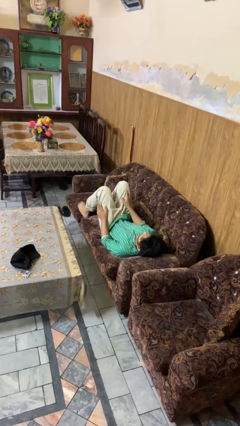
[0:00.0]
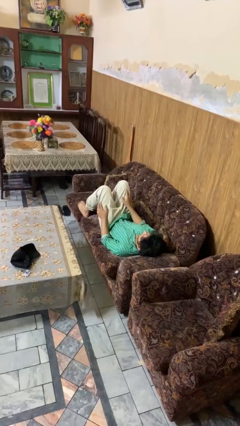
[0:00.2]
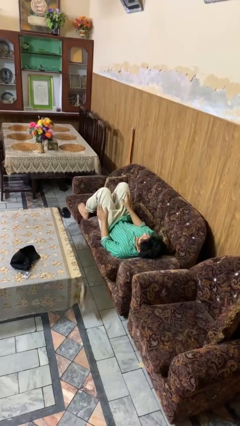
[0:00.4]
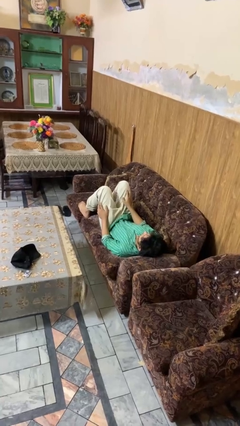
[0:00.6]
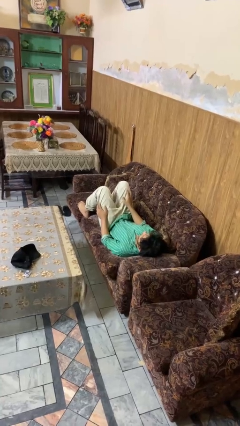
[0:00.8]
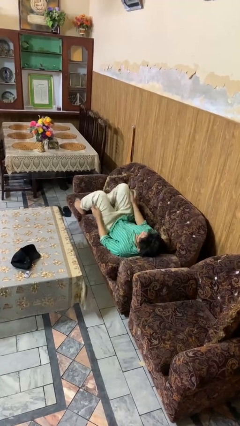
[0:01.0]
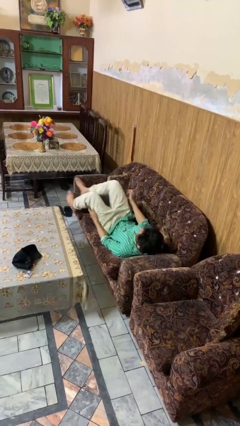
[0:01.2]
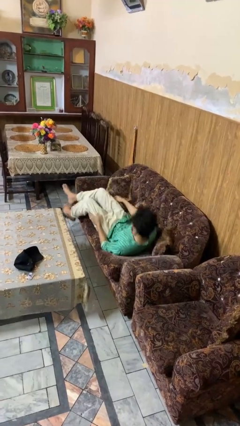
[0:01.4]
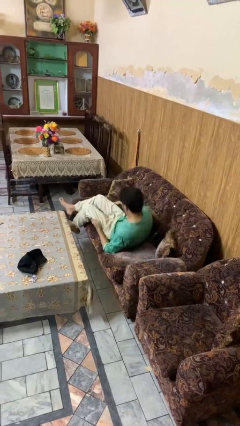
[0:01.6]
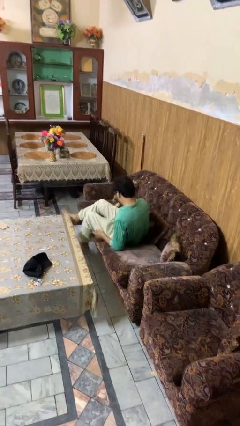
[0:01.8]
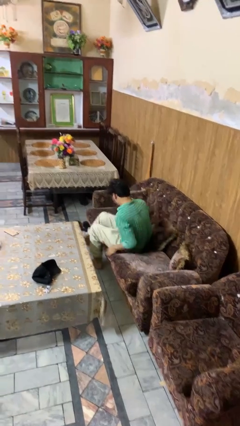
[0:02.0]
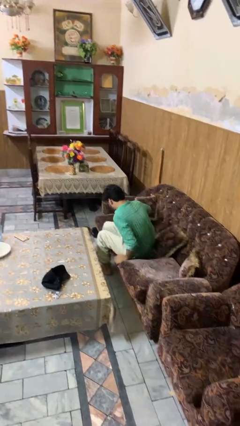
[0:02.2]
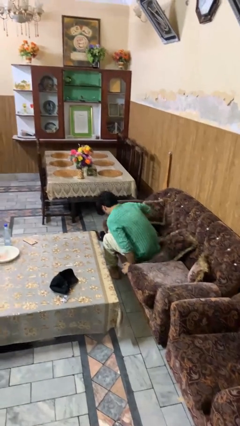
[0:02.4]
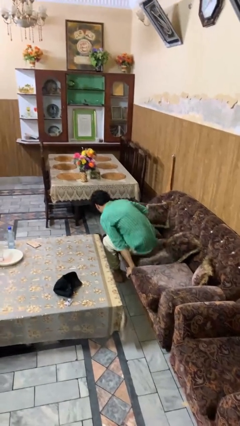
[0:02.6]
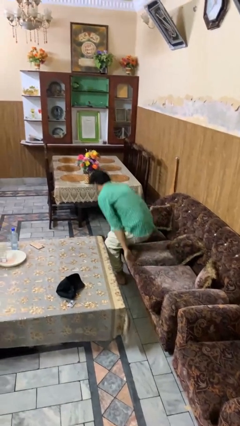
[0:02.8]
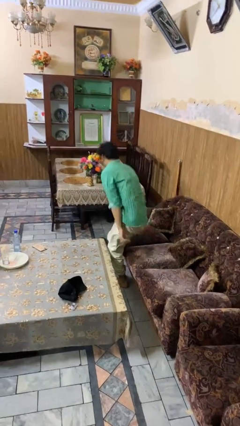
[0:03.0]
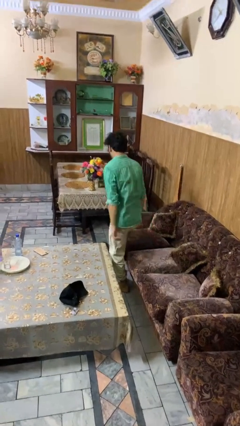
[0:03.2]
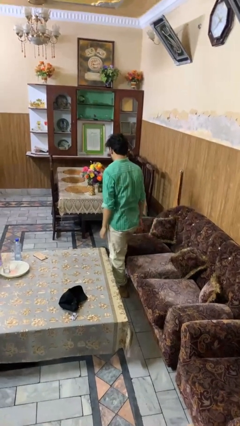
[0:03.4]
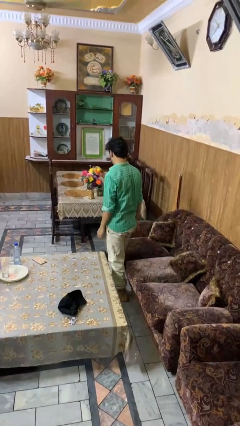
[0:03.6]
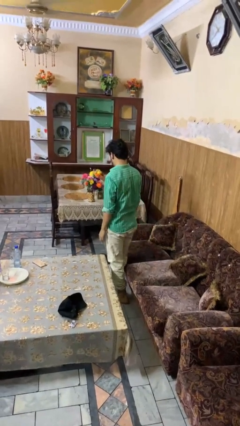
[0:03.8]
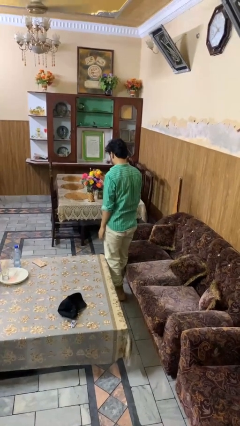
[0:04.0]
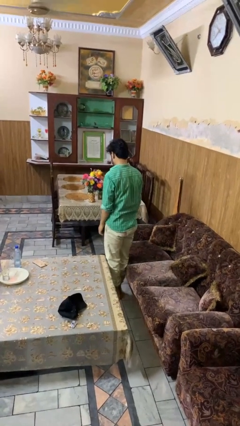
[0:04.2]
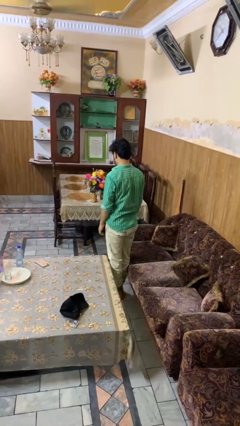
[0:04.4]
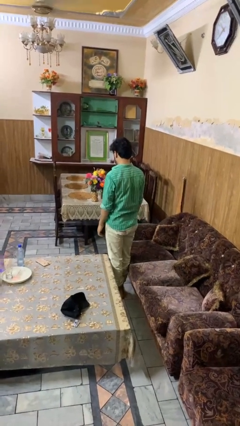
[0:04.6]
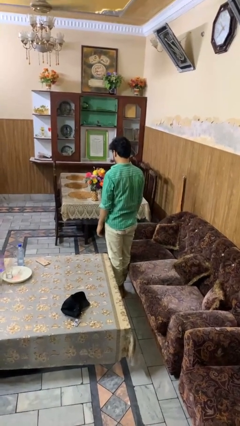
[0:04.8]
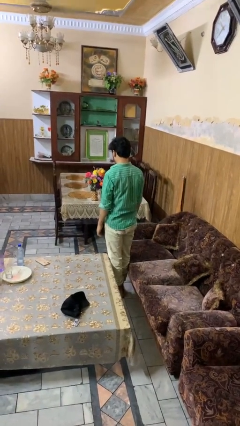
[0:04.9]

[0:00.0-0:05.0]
person stands up

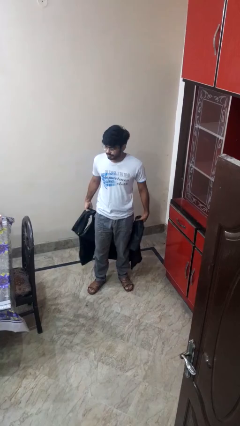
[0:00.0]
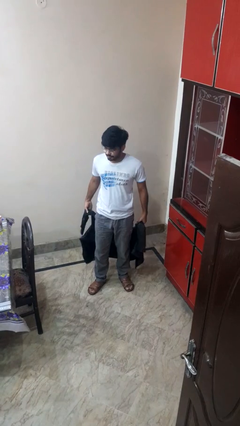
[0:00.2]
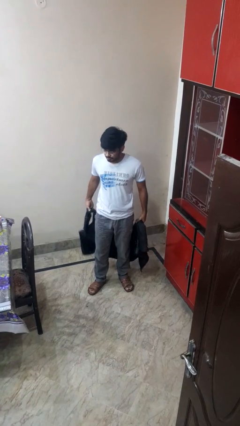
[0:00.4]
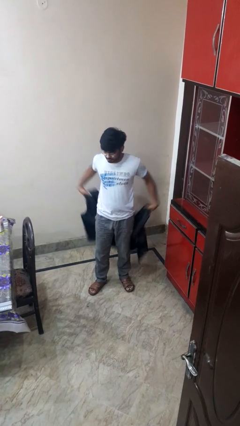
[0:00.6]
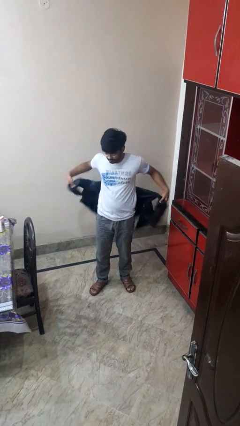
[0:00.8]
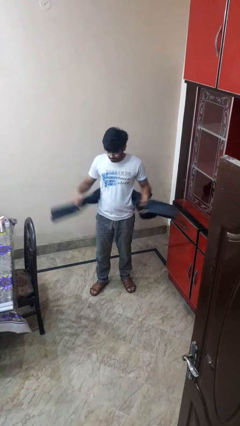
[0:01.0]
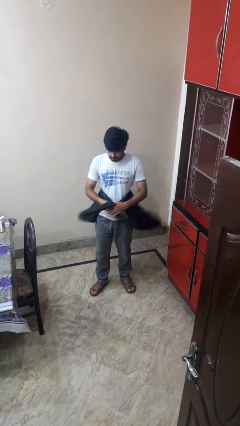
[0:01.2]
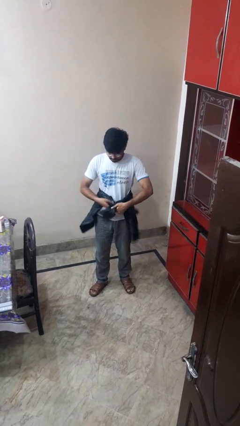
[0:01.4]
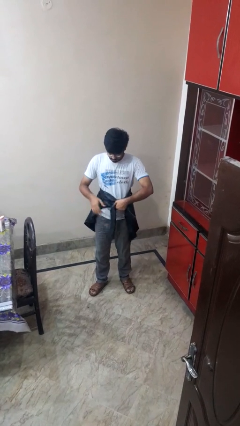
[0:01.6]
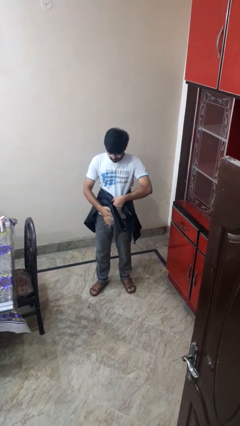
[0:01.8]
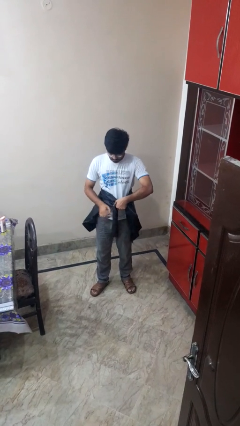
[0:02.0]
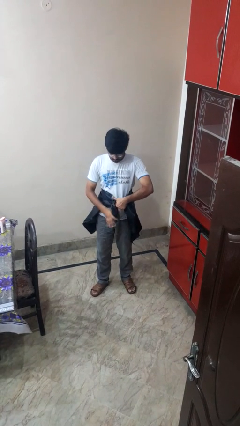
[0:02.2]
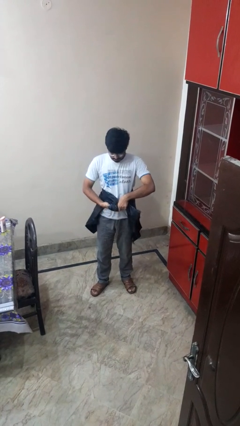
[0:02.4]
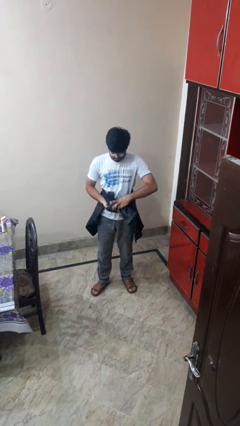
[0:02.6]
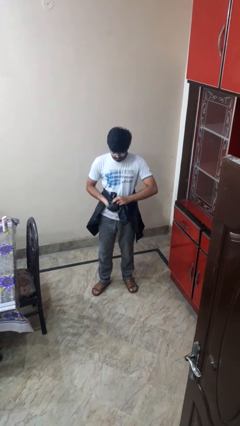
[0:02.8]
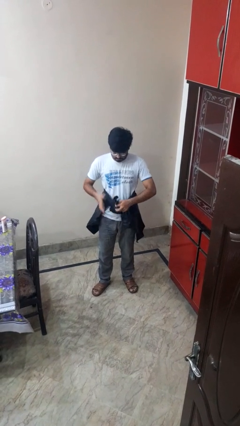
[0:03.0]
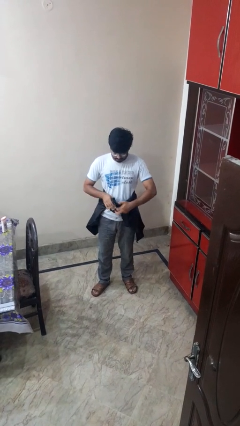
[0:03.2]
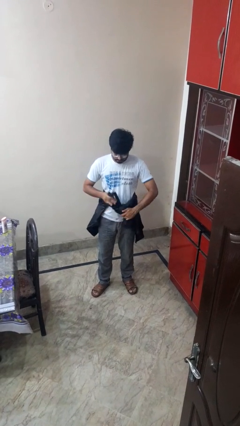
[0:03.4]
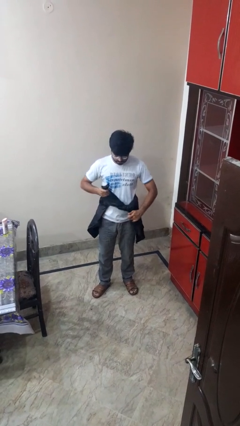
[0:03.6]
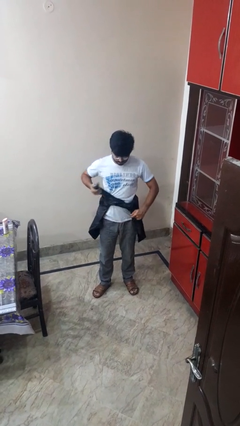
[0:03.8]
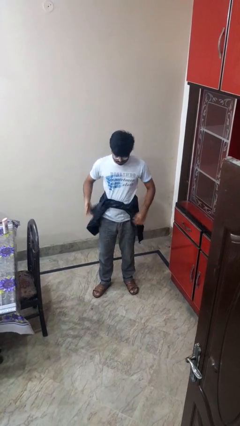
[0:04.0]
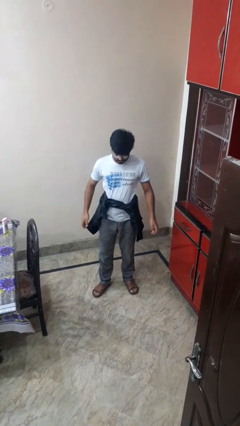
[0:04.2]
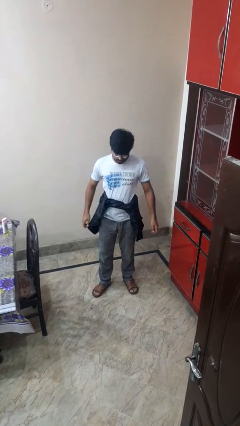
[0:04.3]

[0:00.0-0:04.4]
person ties jacket around waist

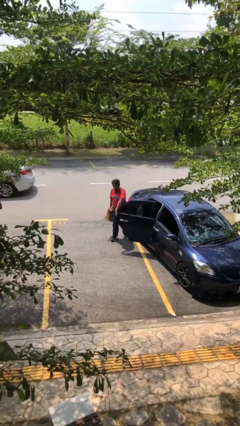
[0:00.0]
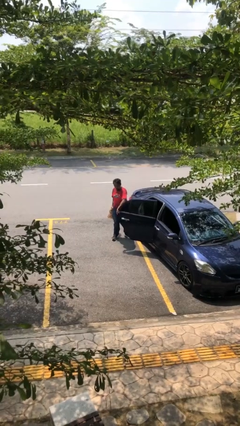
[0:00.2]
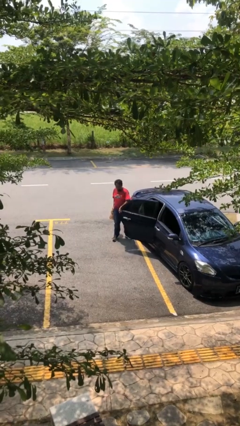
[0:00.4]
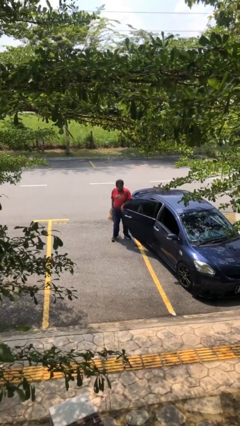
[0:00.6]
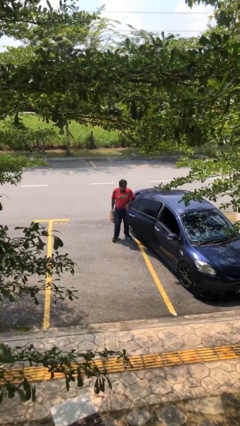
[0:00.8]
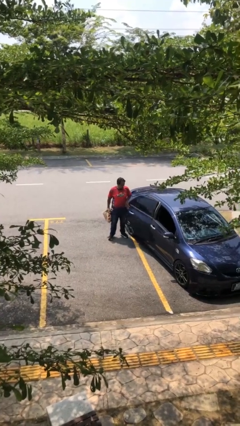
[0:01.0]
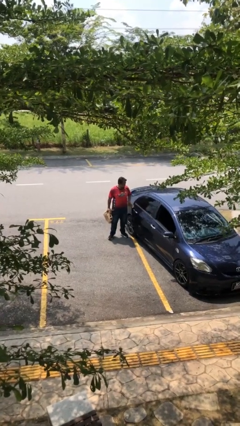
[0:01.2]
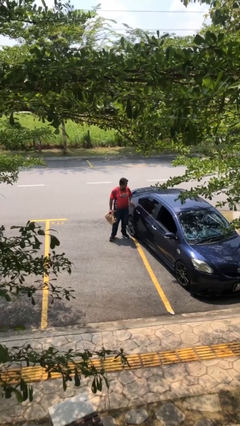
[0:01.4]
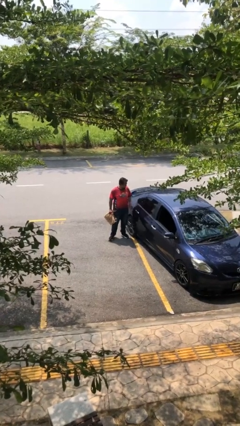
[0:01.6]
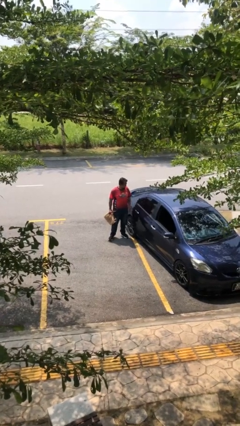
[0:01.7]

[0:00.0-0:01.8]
person closes car door

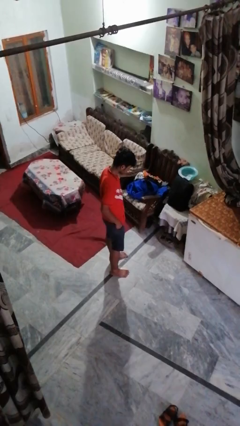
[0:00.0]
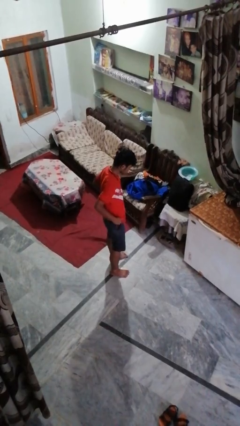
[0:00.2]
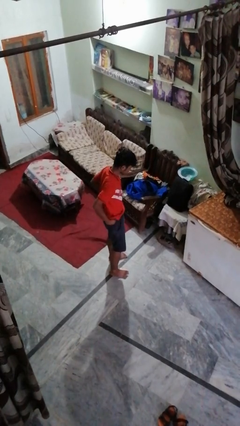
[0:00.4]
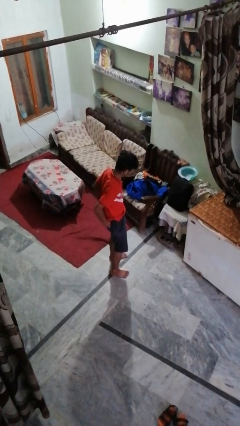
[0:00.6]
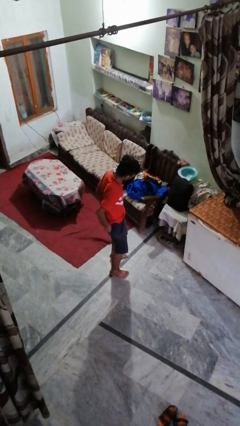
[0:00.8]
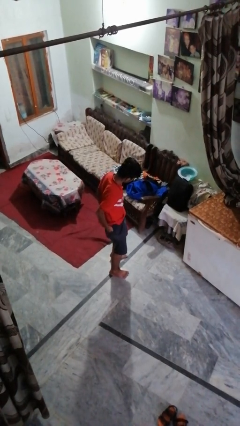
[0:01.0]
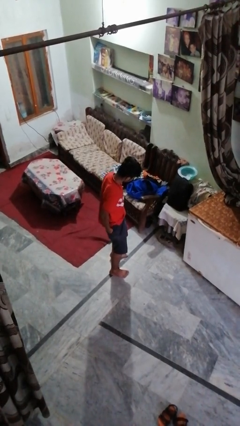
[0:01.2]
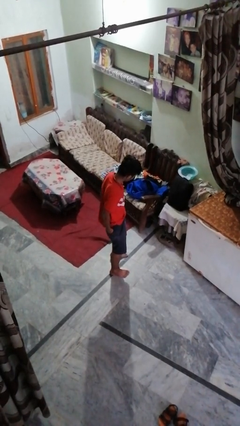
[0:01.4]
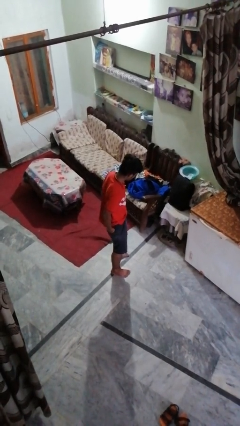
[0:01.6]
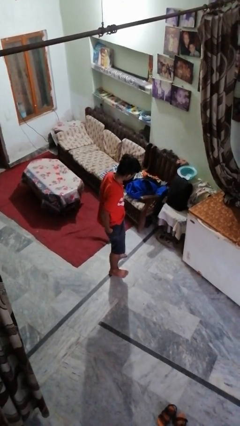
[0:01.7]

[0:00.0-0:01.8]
person puts hands in back pockets

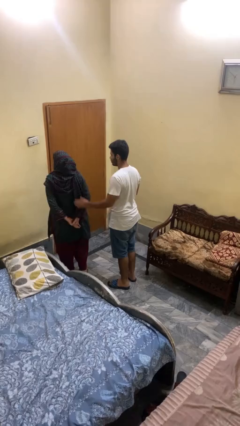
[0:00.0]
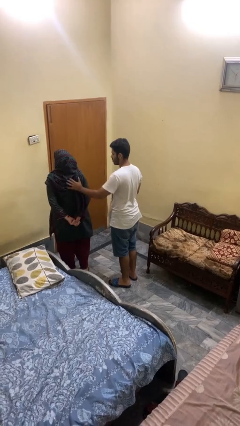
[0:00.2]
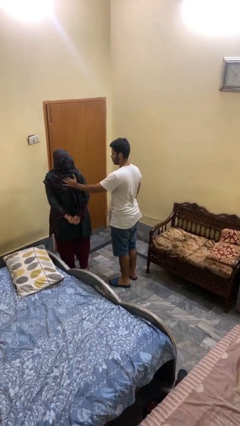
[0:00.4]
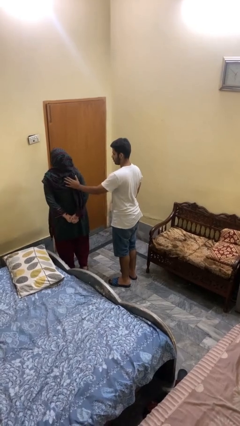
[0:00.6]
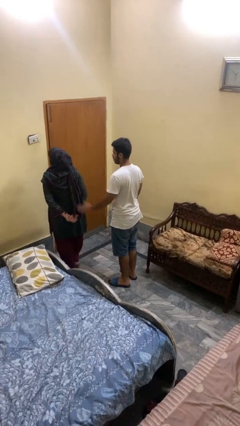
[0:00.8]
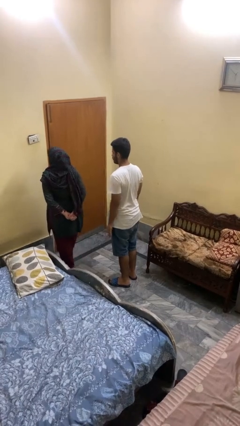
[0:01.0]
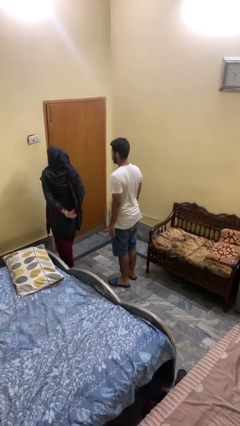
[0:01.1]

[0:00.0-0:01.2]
person shoves person

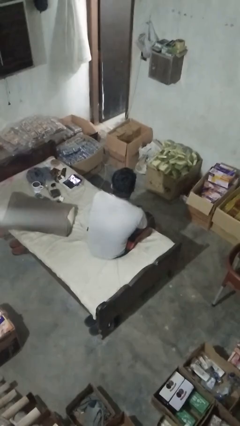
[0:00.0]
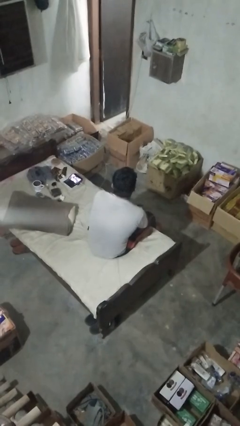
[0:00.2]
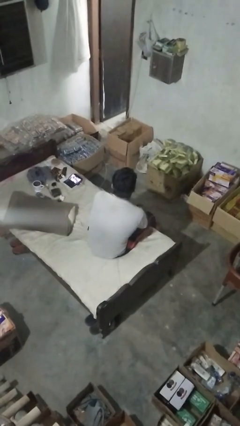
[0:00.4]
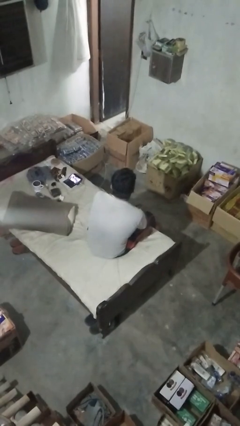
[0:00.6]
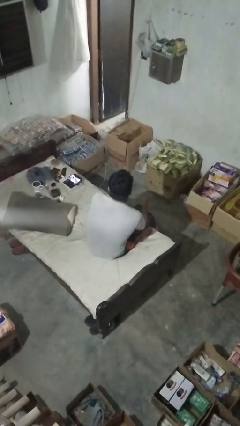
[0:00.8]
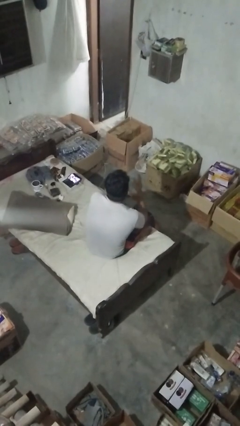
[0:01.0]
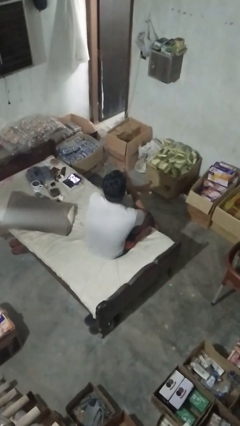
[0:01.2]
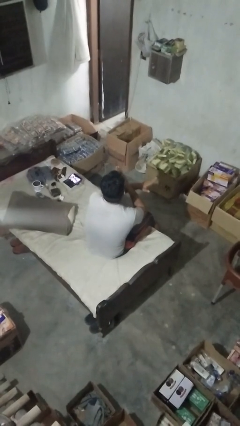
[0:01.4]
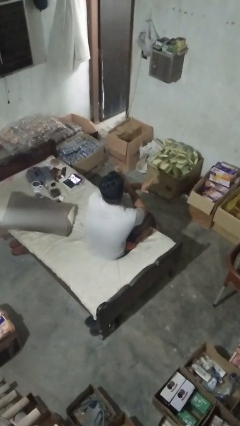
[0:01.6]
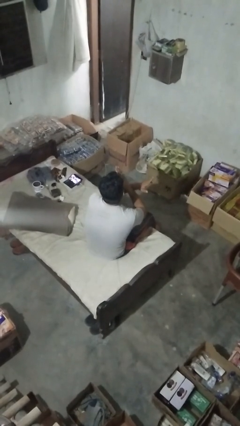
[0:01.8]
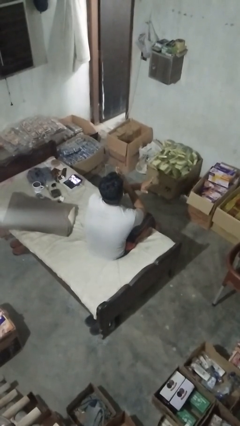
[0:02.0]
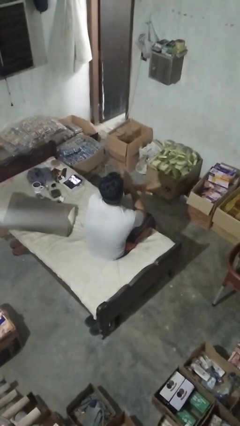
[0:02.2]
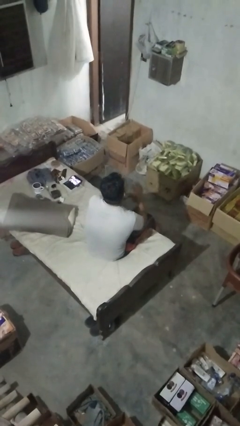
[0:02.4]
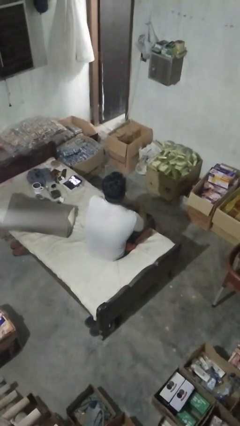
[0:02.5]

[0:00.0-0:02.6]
person gestures arms x

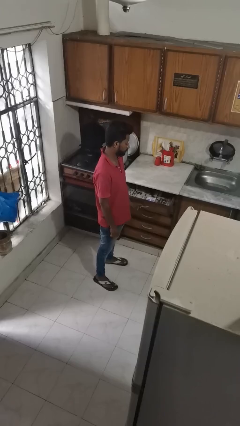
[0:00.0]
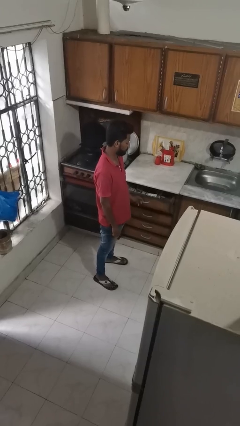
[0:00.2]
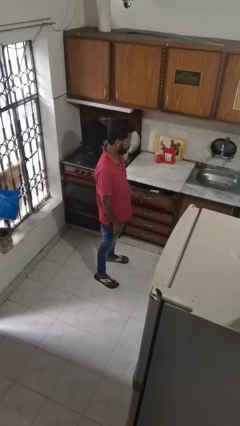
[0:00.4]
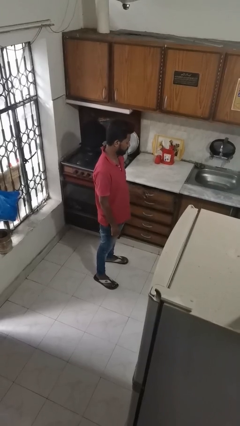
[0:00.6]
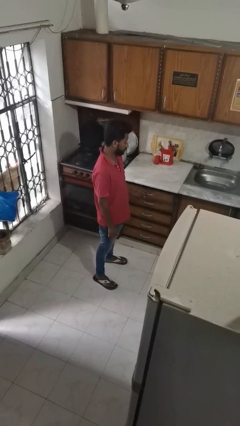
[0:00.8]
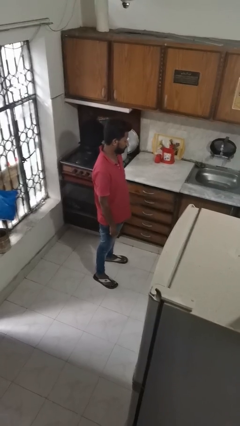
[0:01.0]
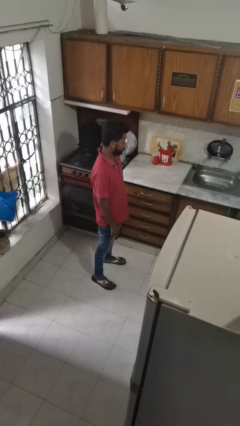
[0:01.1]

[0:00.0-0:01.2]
person closes kitchen drawer
